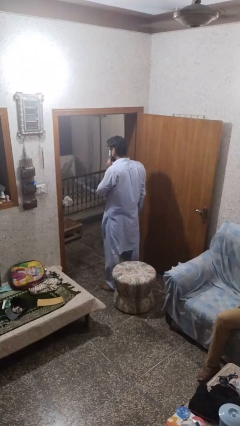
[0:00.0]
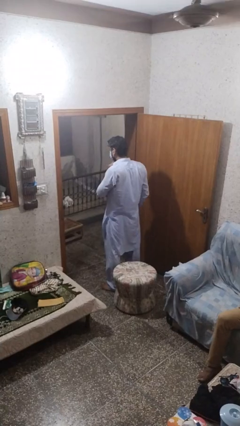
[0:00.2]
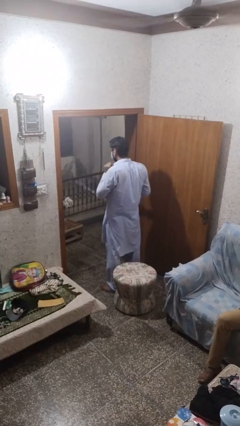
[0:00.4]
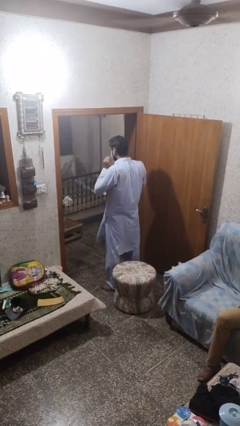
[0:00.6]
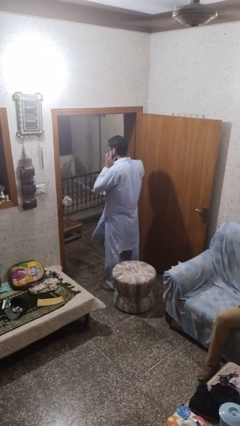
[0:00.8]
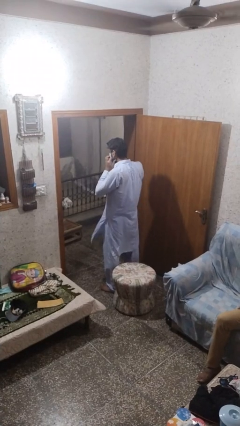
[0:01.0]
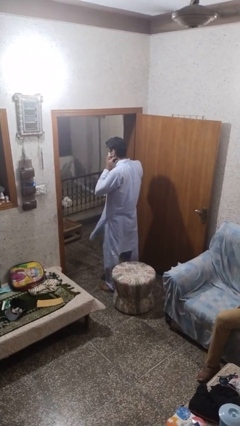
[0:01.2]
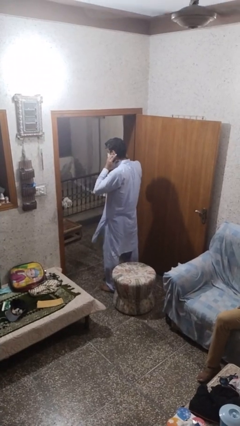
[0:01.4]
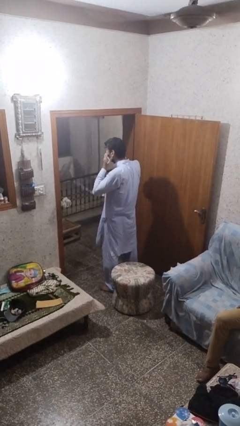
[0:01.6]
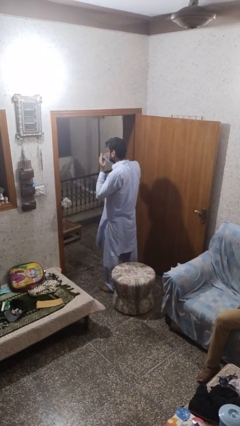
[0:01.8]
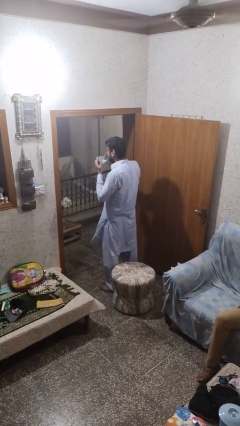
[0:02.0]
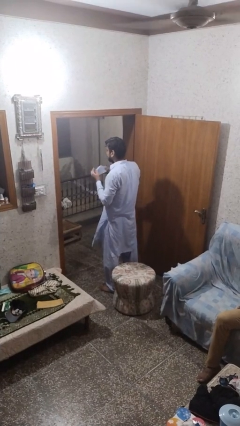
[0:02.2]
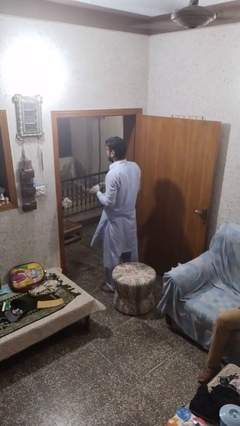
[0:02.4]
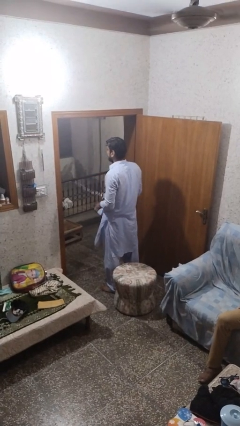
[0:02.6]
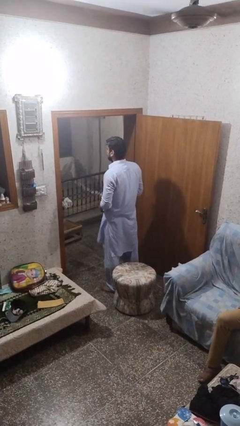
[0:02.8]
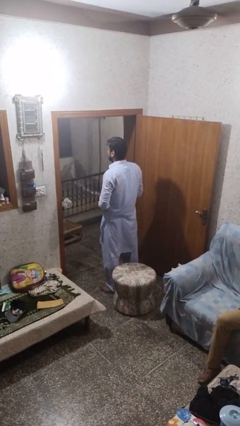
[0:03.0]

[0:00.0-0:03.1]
person takes off facemask

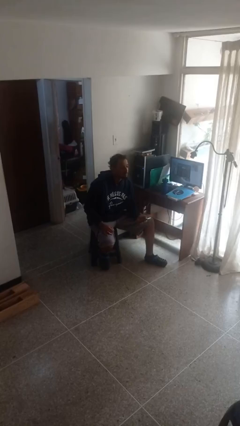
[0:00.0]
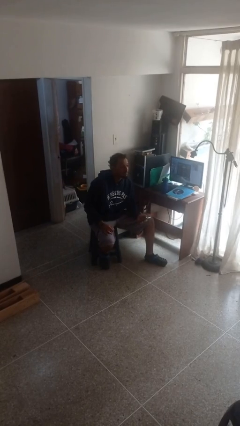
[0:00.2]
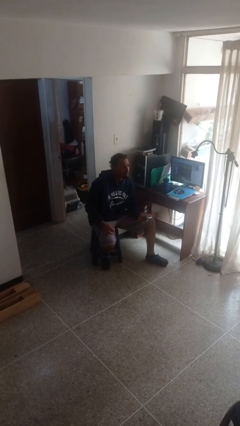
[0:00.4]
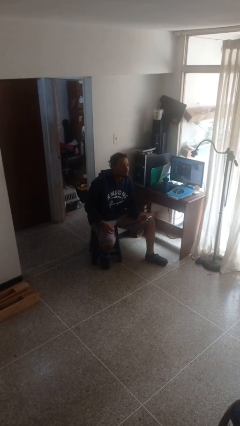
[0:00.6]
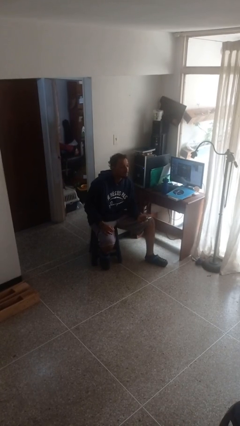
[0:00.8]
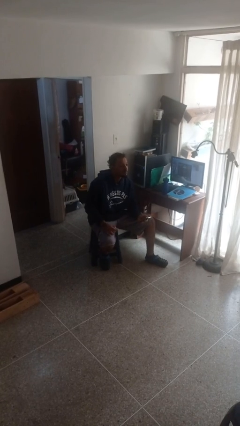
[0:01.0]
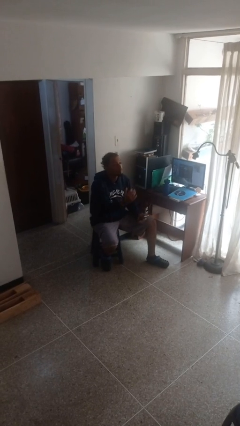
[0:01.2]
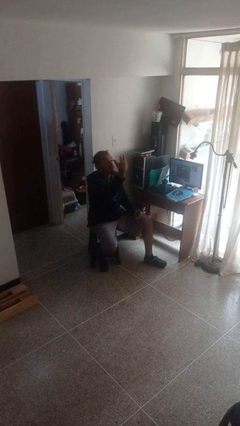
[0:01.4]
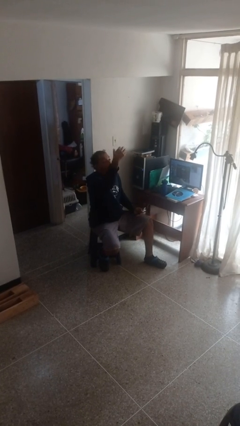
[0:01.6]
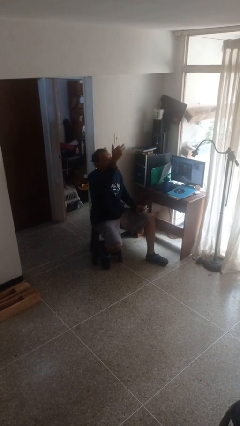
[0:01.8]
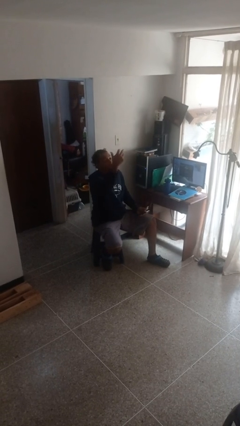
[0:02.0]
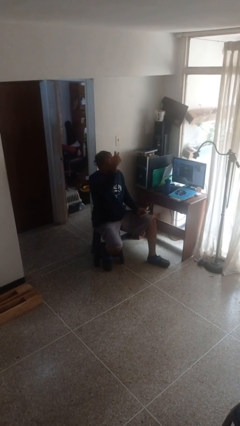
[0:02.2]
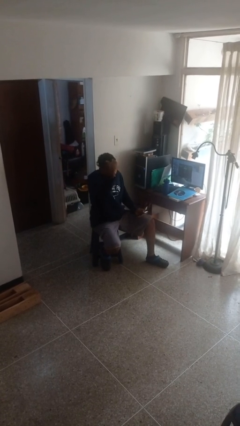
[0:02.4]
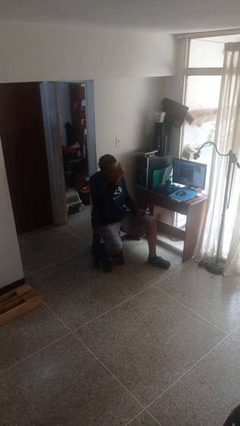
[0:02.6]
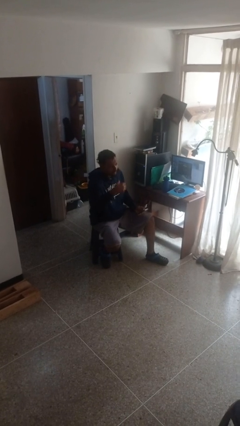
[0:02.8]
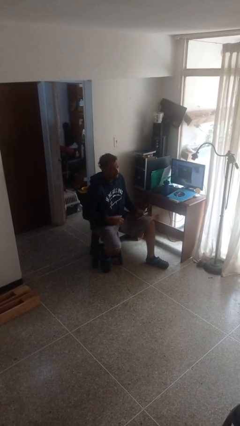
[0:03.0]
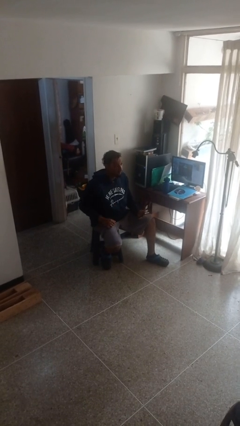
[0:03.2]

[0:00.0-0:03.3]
person gestures come here

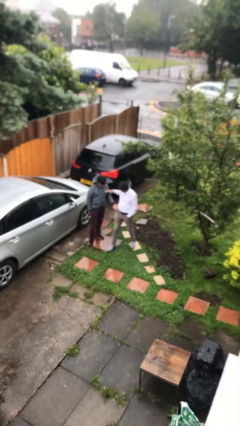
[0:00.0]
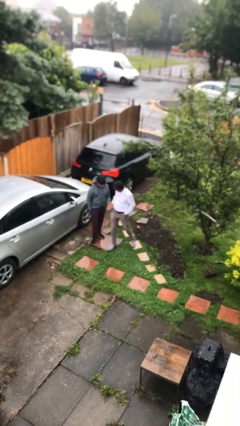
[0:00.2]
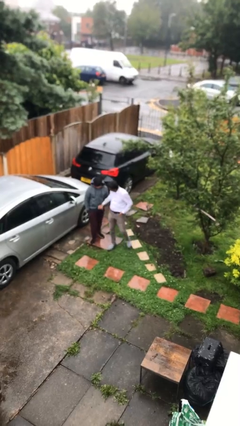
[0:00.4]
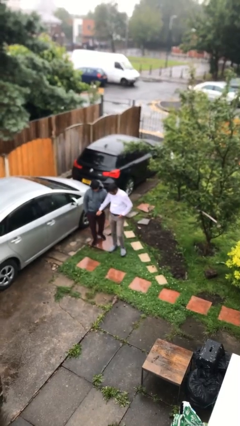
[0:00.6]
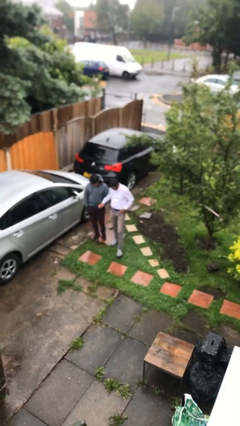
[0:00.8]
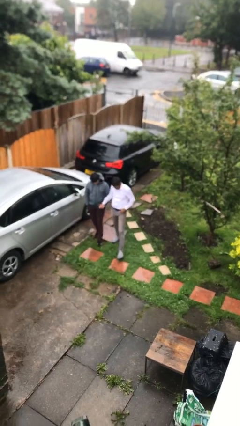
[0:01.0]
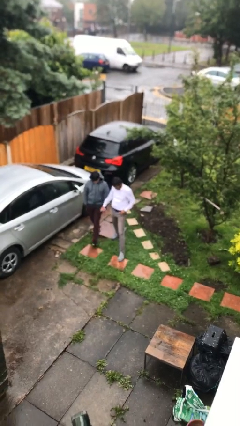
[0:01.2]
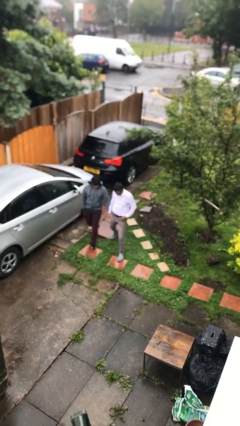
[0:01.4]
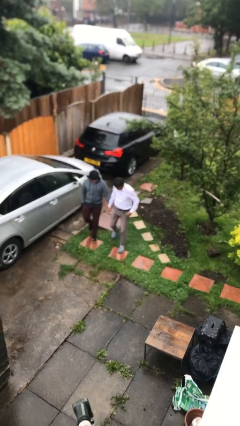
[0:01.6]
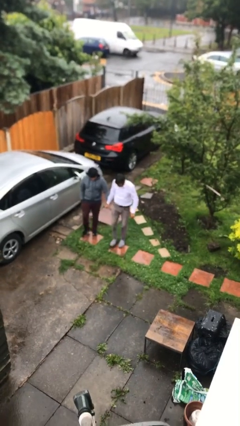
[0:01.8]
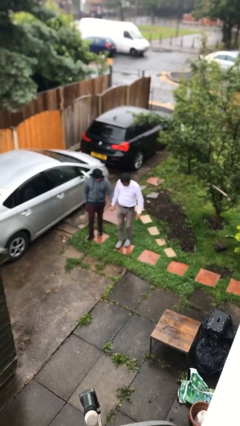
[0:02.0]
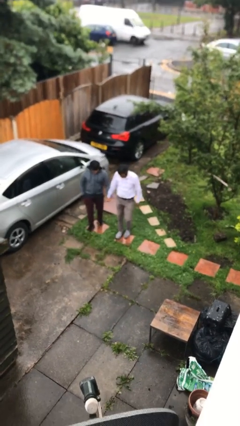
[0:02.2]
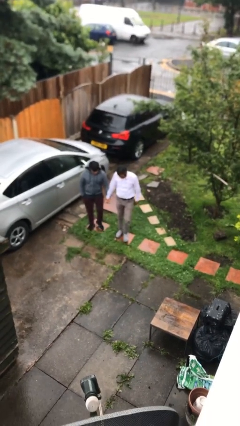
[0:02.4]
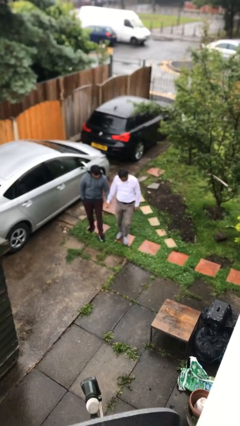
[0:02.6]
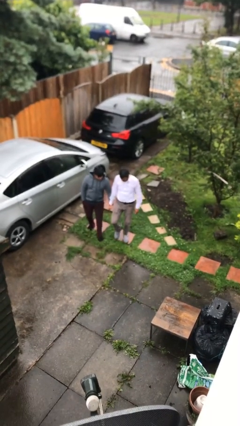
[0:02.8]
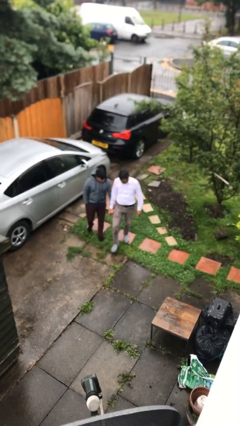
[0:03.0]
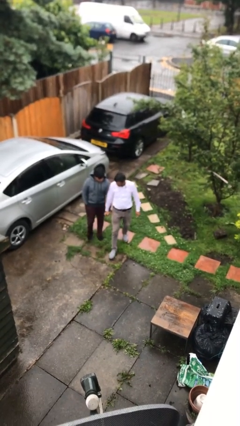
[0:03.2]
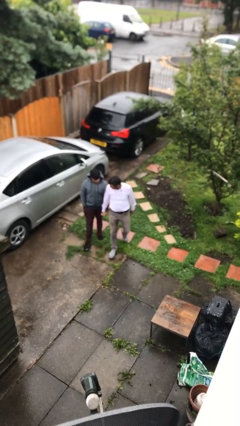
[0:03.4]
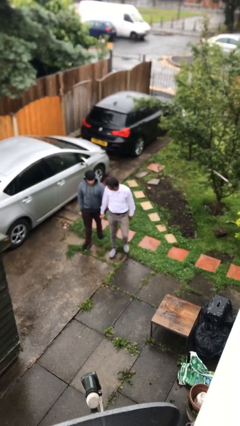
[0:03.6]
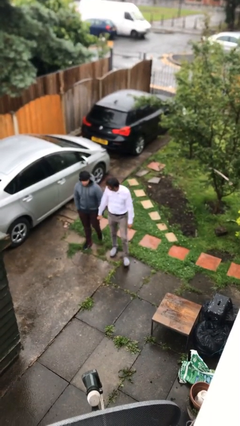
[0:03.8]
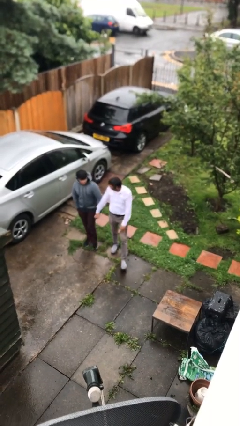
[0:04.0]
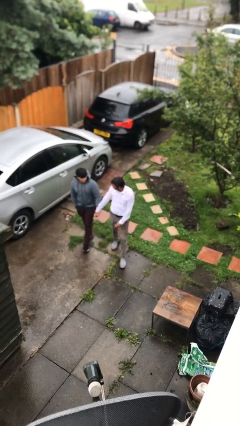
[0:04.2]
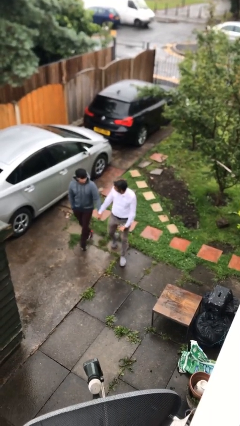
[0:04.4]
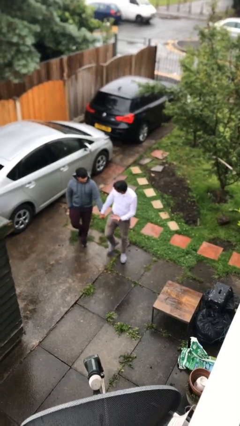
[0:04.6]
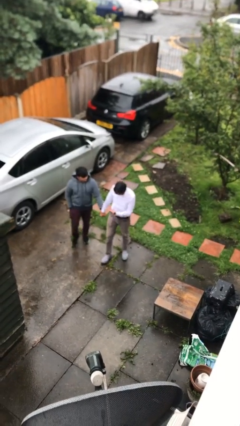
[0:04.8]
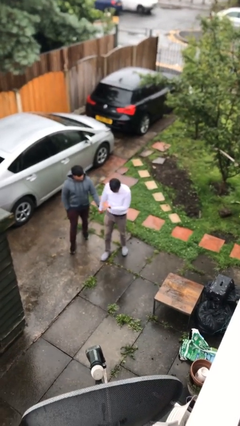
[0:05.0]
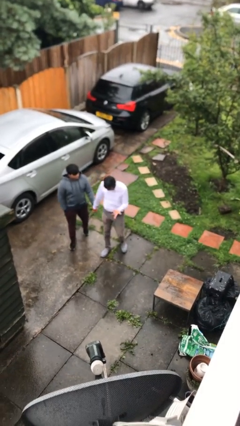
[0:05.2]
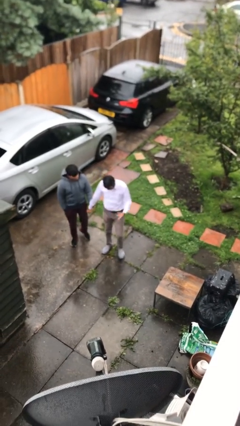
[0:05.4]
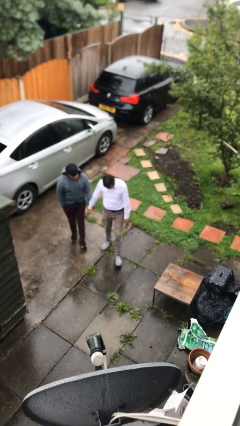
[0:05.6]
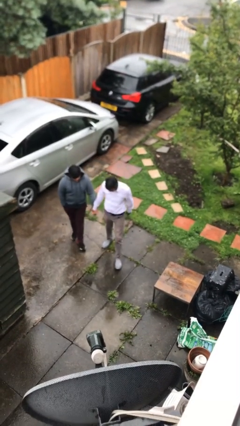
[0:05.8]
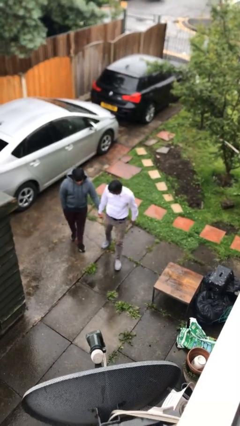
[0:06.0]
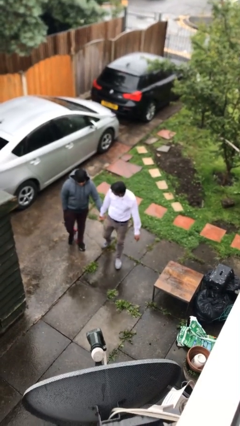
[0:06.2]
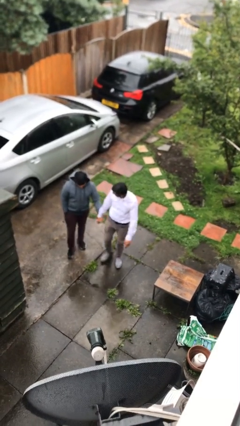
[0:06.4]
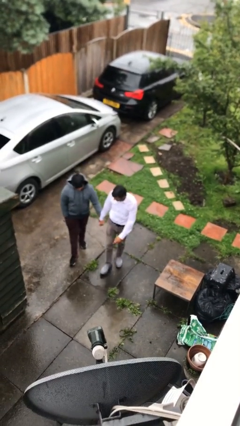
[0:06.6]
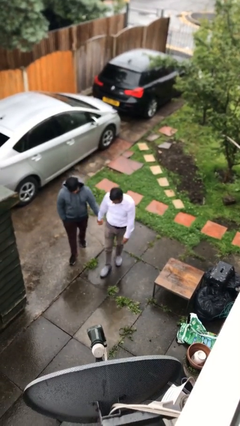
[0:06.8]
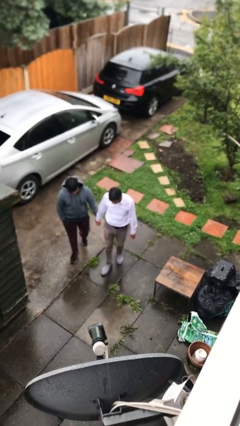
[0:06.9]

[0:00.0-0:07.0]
person holds hand

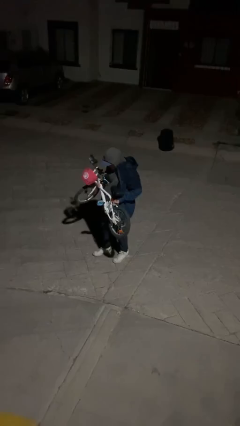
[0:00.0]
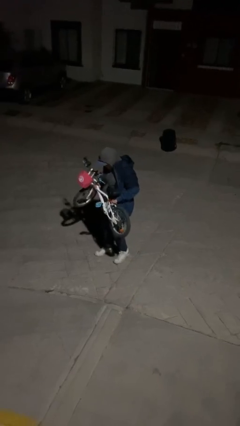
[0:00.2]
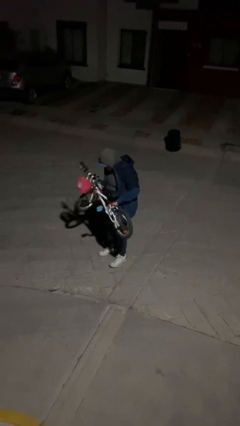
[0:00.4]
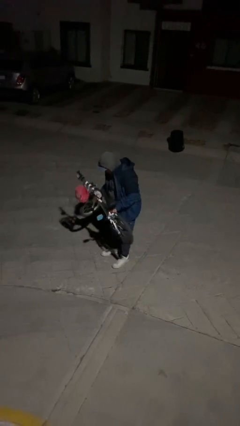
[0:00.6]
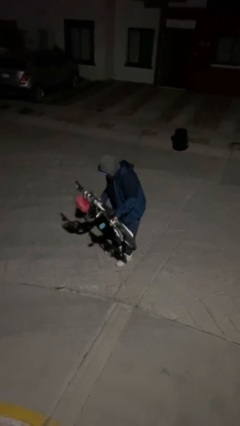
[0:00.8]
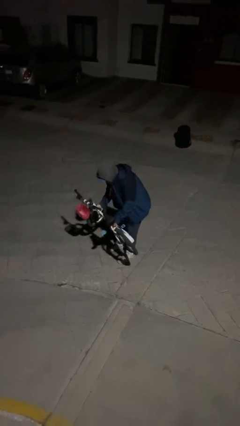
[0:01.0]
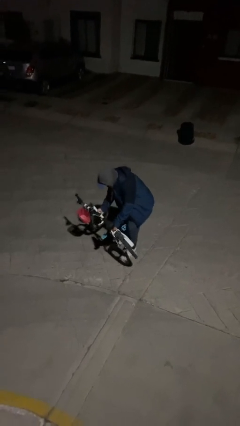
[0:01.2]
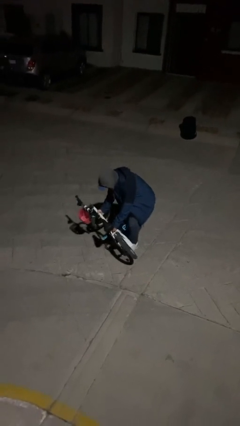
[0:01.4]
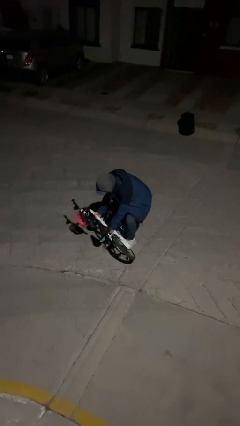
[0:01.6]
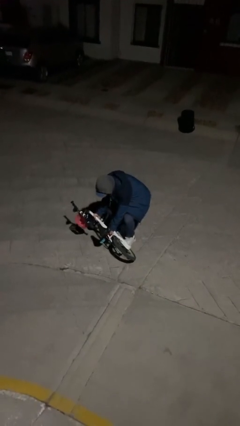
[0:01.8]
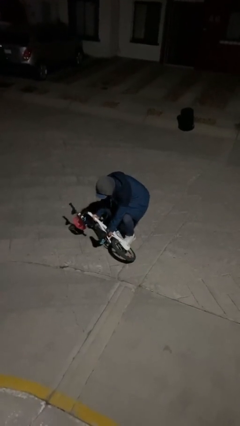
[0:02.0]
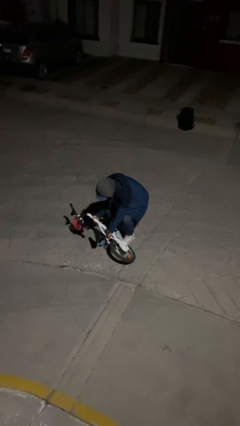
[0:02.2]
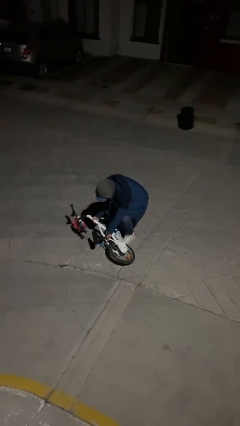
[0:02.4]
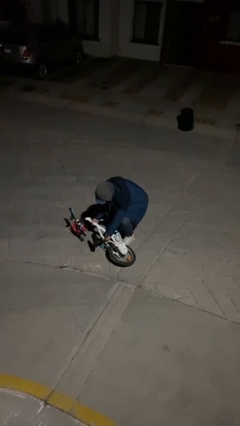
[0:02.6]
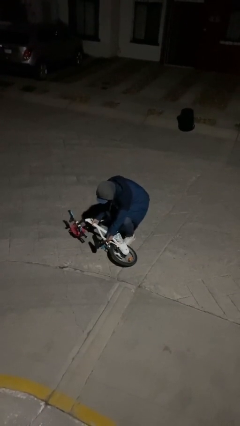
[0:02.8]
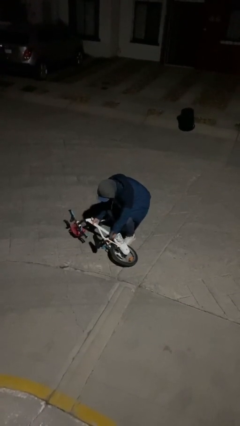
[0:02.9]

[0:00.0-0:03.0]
person puts down object on floor

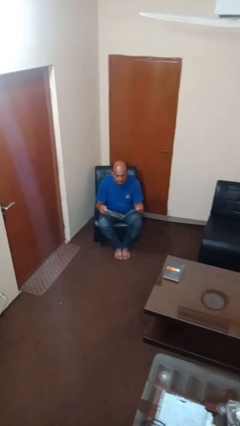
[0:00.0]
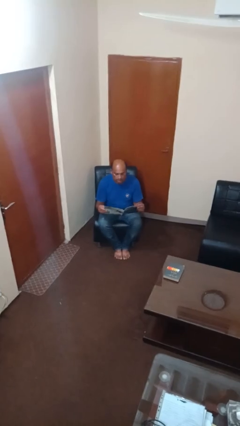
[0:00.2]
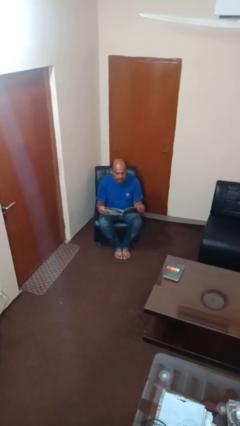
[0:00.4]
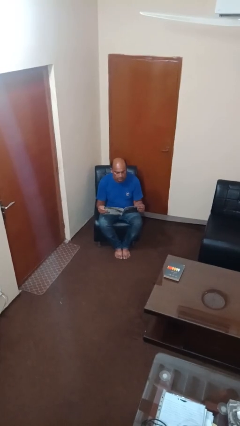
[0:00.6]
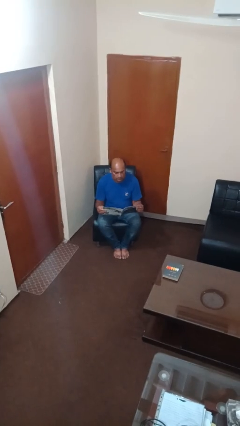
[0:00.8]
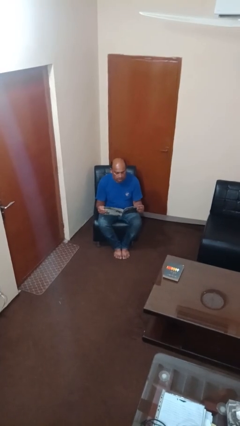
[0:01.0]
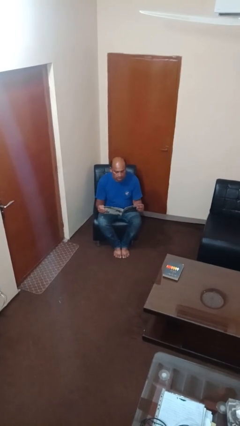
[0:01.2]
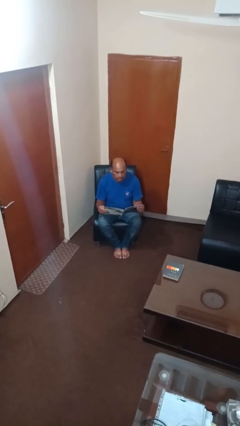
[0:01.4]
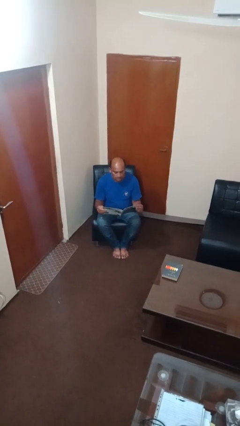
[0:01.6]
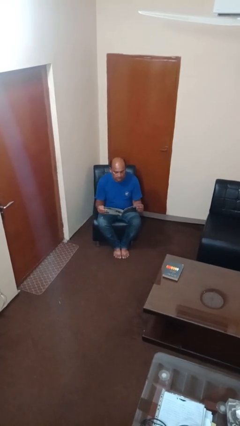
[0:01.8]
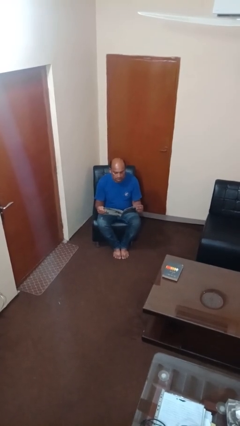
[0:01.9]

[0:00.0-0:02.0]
person reads magazine
